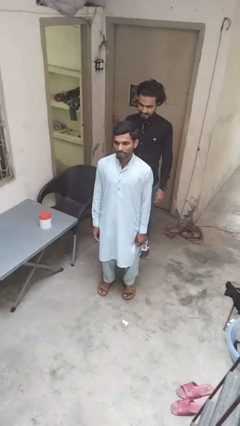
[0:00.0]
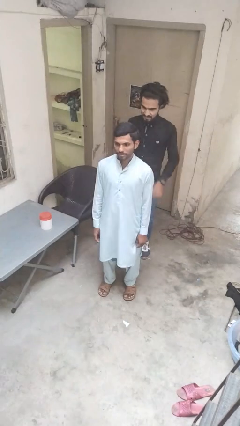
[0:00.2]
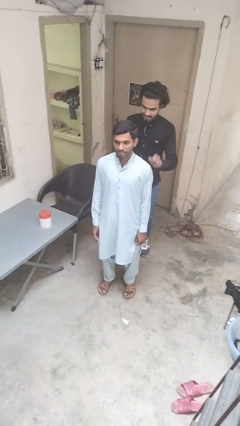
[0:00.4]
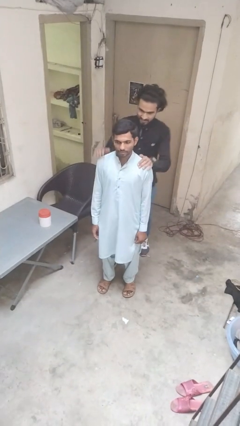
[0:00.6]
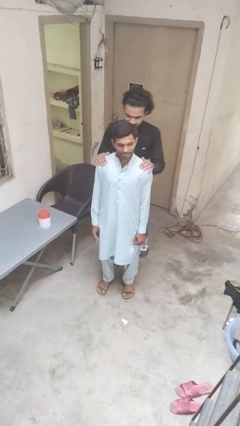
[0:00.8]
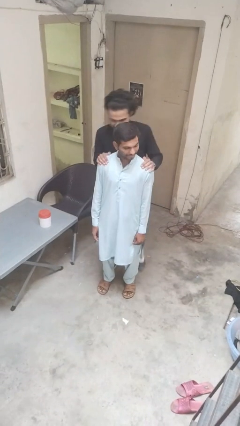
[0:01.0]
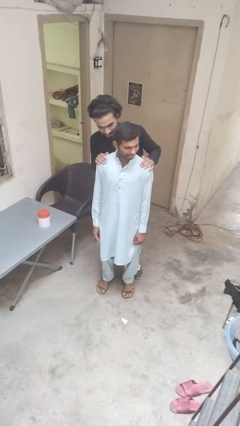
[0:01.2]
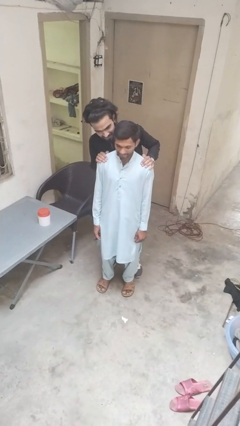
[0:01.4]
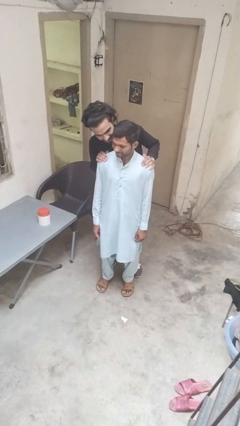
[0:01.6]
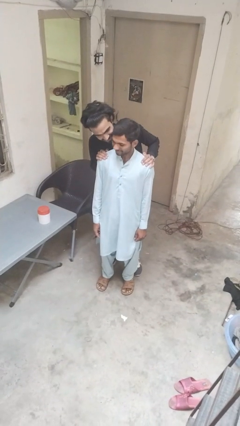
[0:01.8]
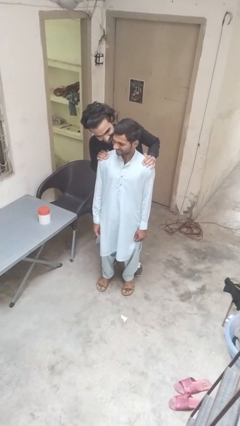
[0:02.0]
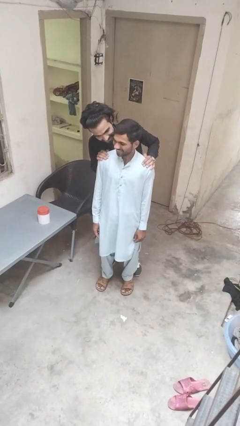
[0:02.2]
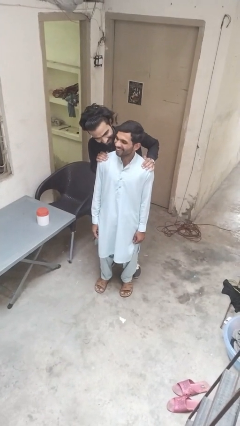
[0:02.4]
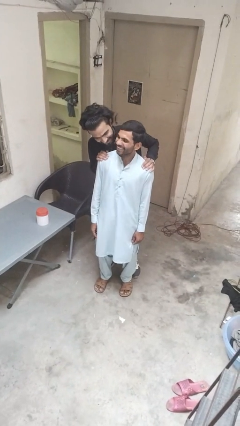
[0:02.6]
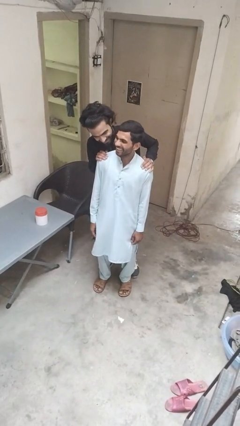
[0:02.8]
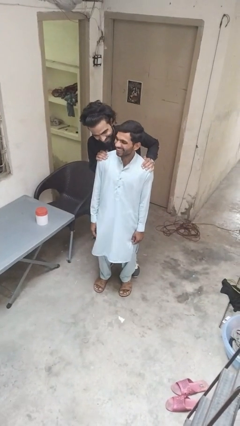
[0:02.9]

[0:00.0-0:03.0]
person looks over shoulder

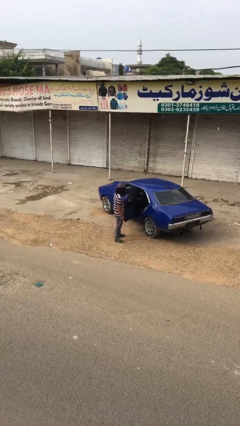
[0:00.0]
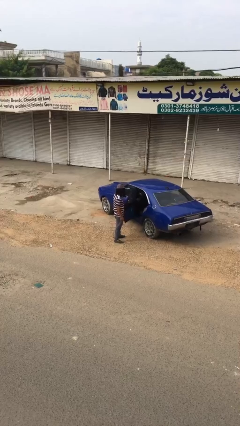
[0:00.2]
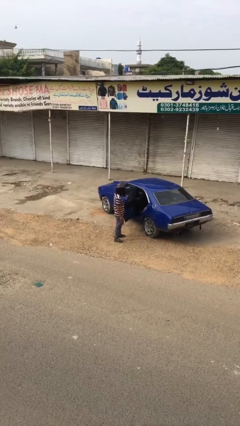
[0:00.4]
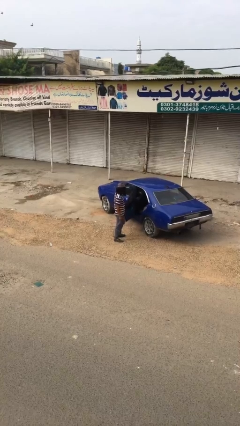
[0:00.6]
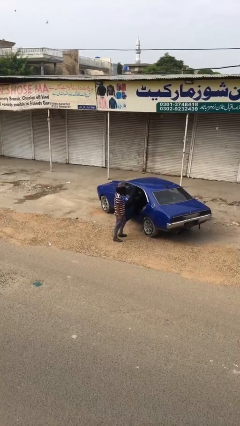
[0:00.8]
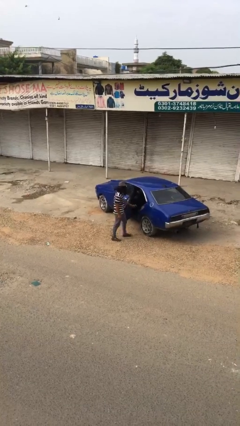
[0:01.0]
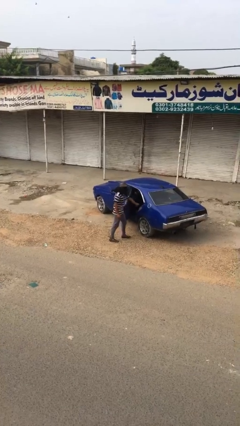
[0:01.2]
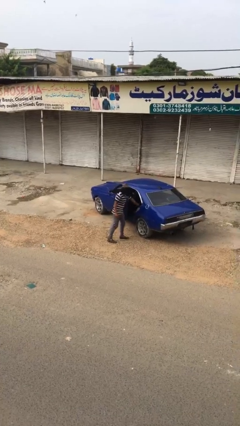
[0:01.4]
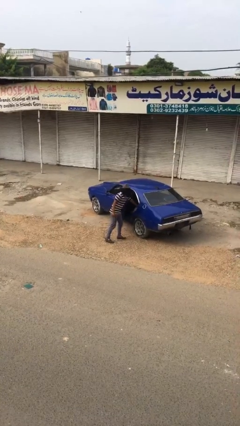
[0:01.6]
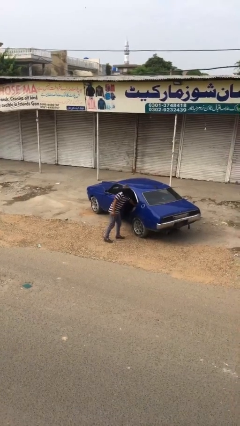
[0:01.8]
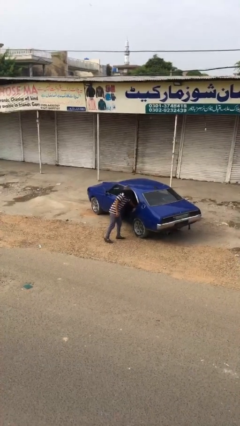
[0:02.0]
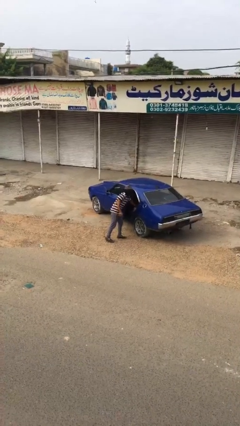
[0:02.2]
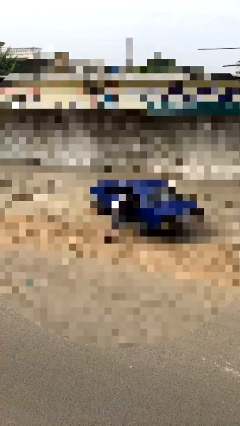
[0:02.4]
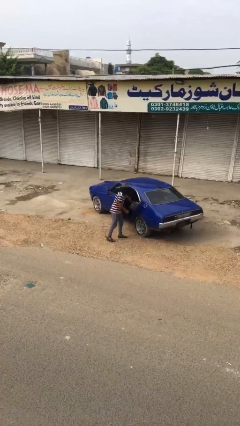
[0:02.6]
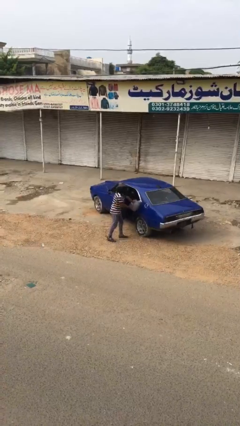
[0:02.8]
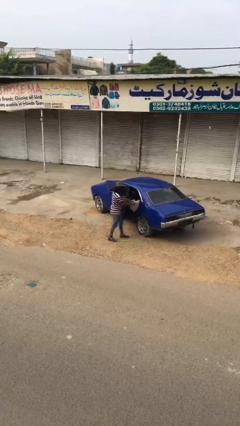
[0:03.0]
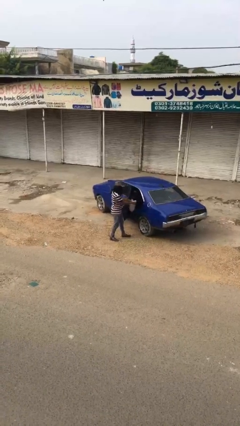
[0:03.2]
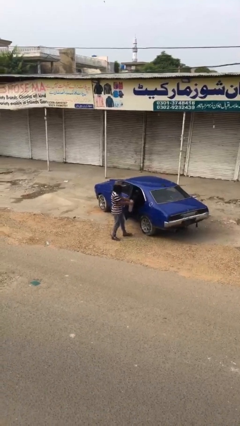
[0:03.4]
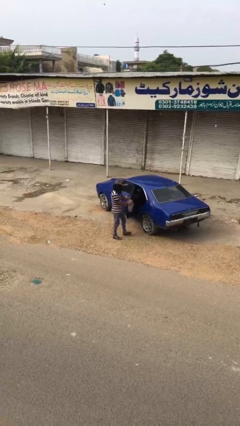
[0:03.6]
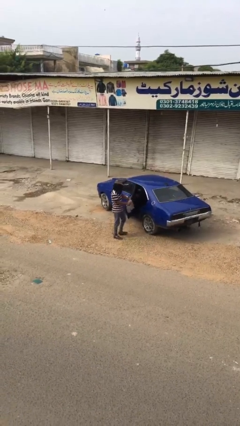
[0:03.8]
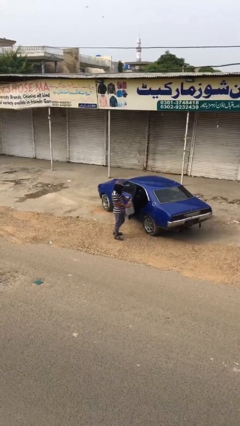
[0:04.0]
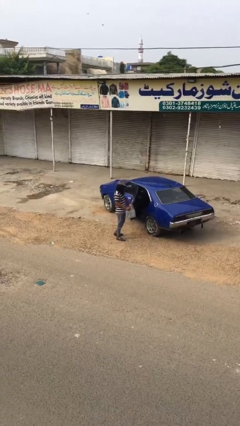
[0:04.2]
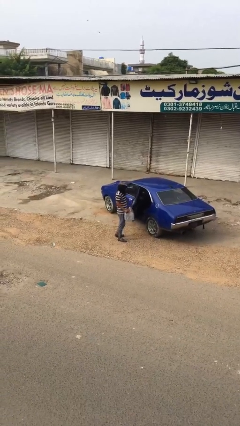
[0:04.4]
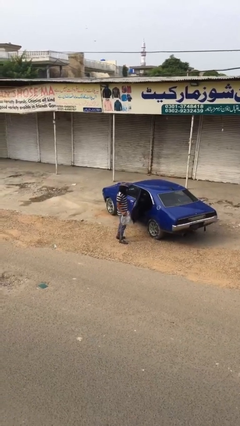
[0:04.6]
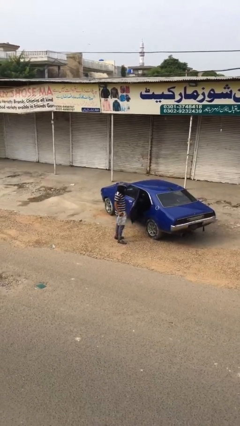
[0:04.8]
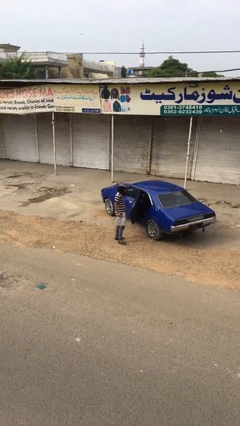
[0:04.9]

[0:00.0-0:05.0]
person unloads car

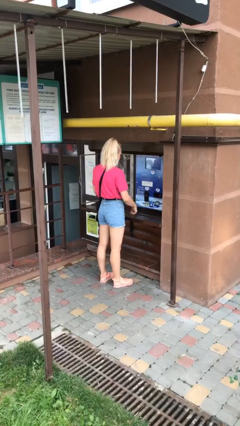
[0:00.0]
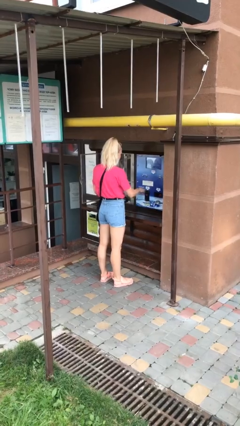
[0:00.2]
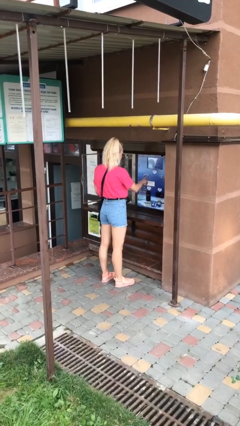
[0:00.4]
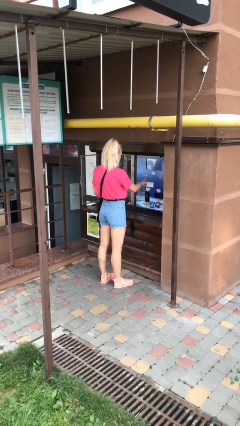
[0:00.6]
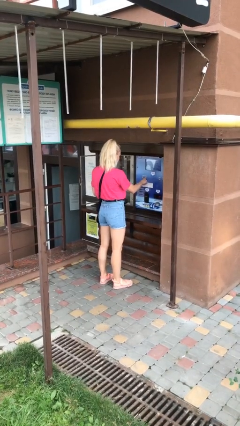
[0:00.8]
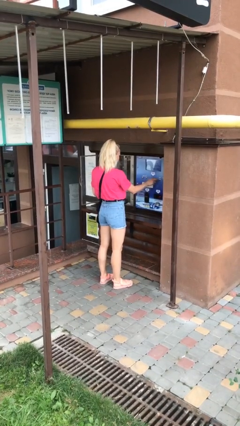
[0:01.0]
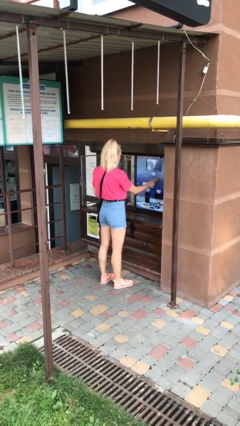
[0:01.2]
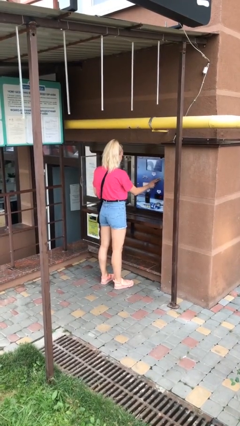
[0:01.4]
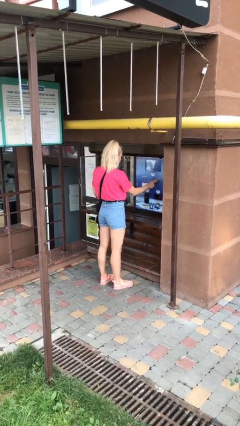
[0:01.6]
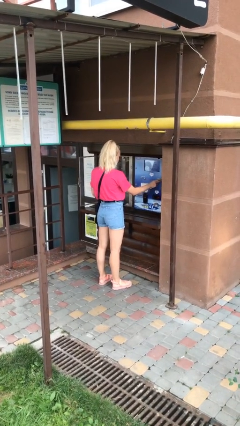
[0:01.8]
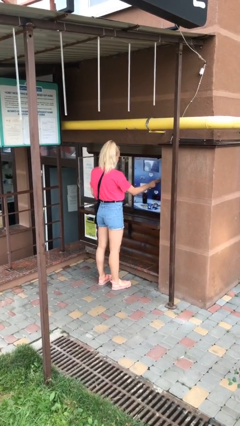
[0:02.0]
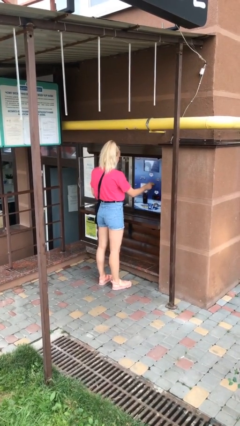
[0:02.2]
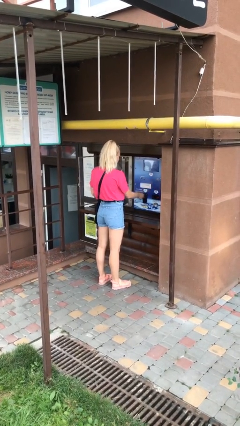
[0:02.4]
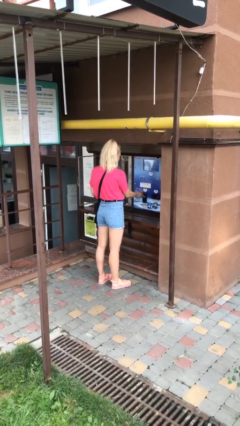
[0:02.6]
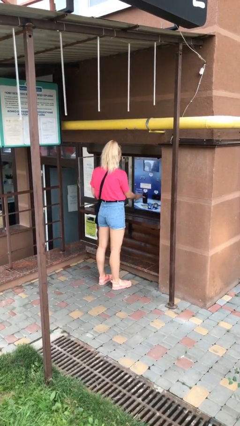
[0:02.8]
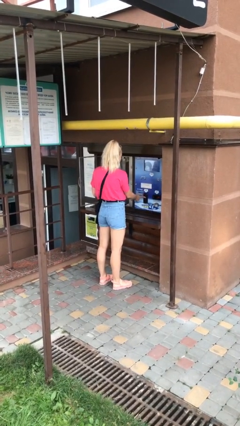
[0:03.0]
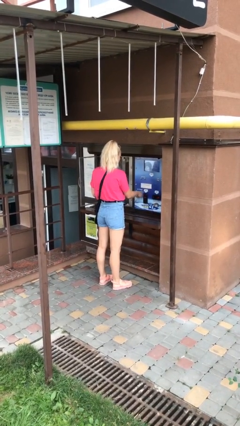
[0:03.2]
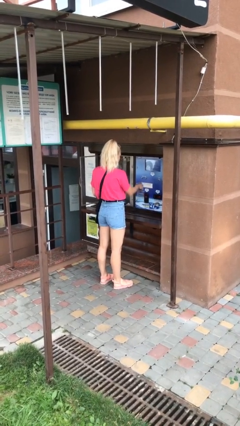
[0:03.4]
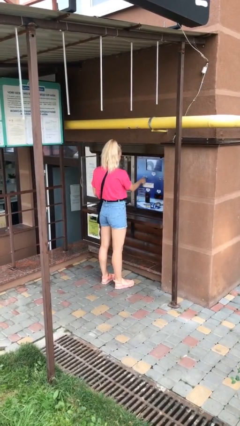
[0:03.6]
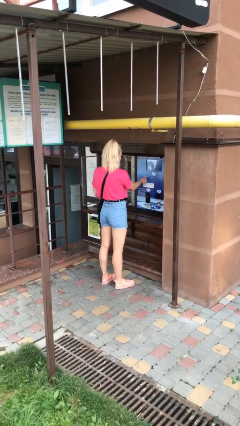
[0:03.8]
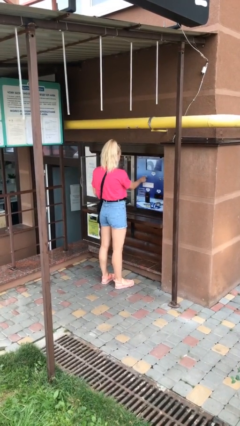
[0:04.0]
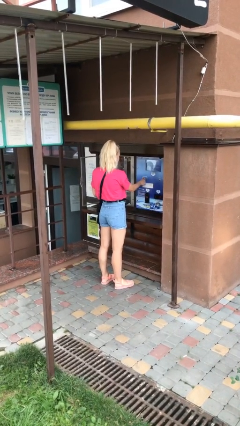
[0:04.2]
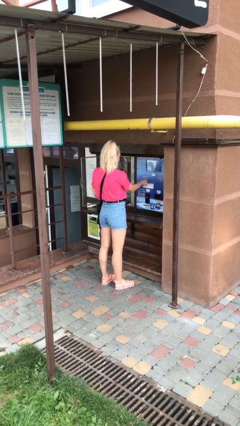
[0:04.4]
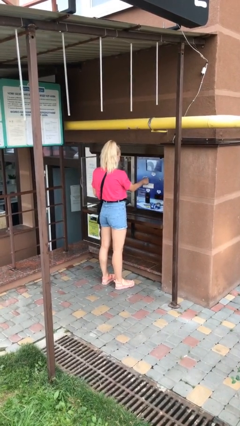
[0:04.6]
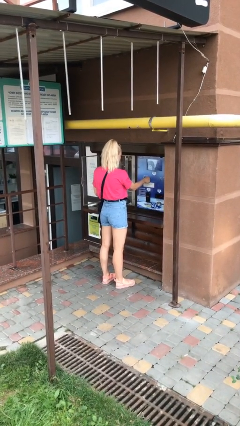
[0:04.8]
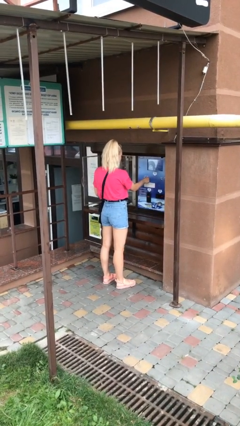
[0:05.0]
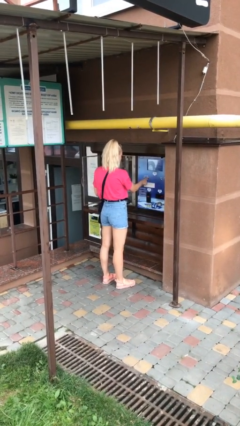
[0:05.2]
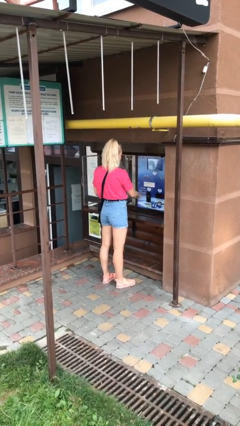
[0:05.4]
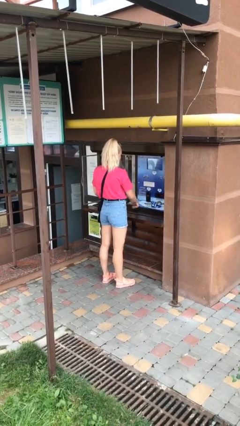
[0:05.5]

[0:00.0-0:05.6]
person purchases from machine

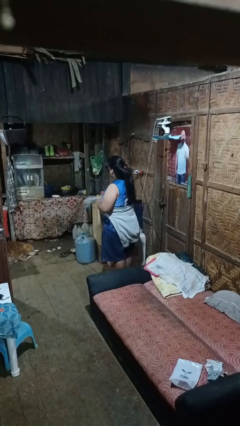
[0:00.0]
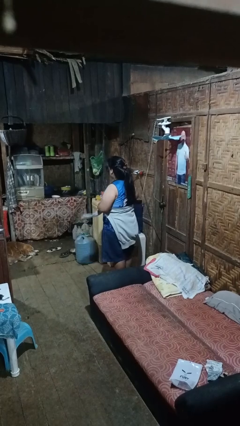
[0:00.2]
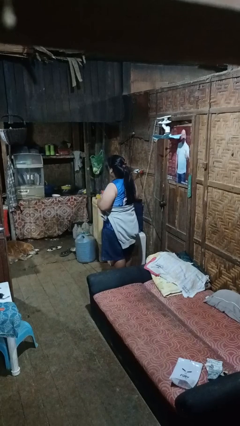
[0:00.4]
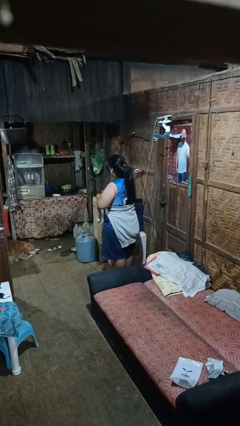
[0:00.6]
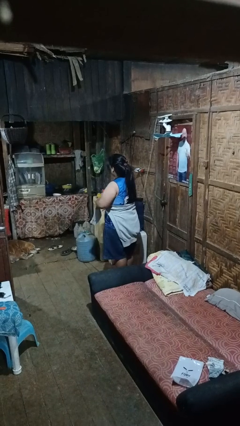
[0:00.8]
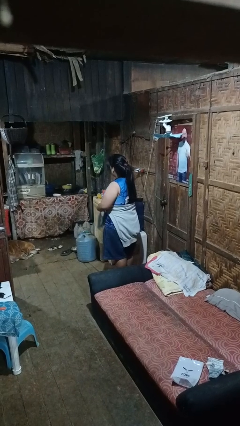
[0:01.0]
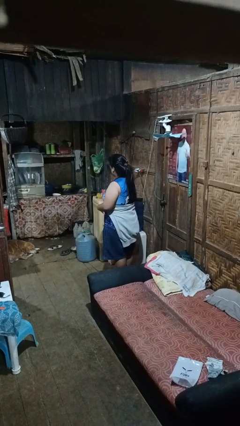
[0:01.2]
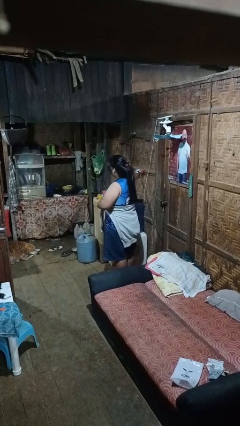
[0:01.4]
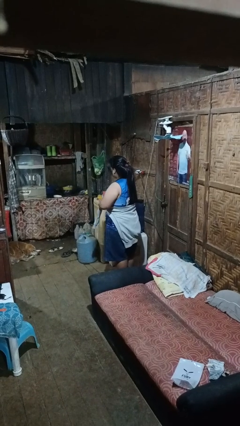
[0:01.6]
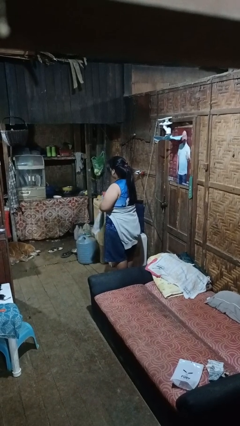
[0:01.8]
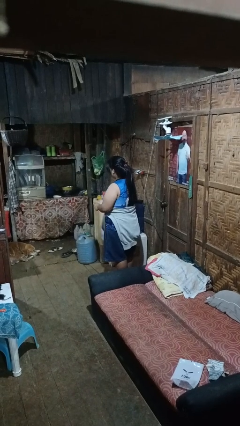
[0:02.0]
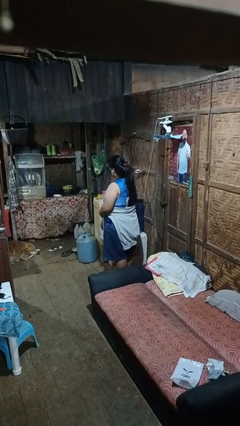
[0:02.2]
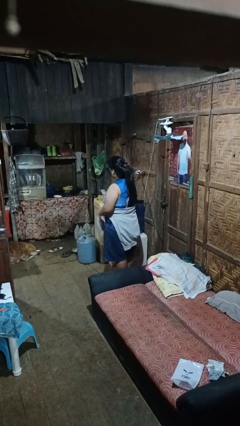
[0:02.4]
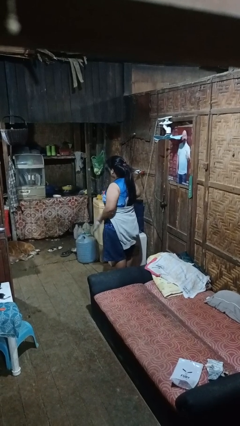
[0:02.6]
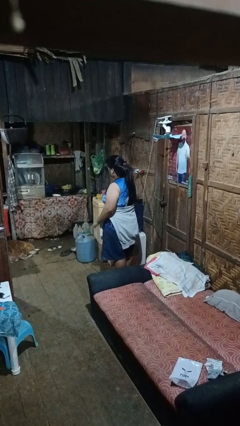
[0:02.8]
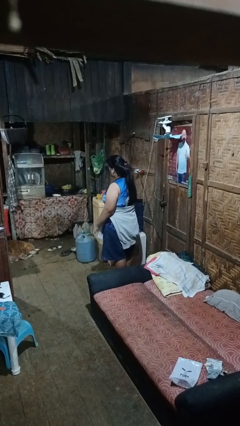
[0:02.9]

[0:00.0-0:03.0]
person ties jacket around waist

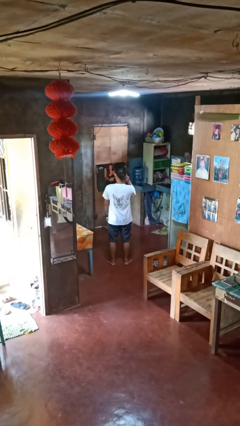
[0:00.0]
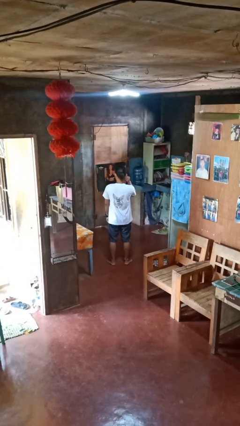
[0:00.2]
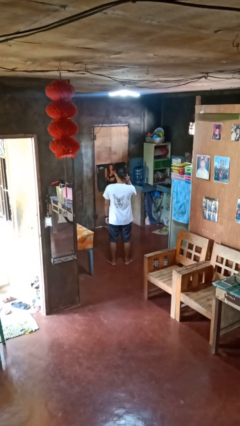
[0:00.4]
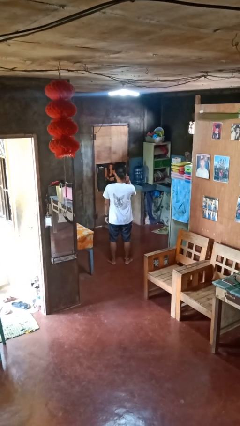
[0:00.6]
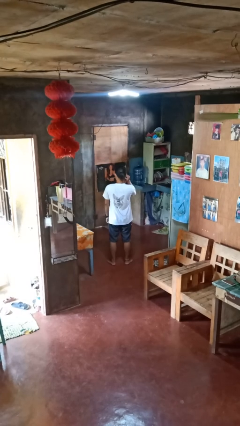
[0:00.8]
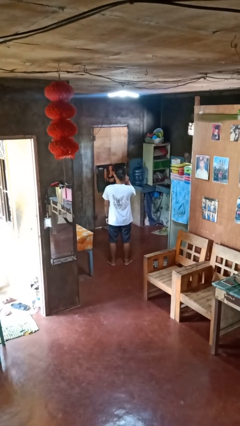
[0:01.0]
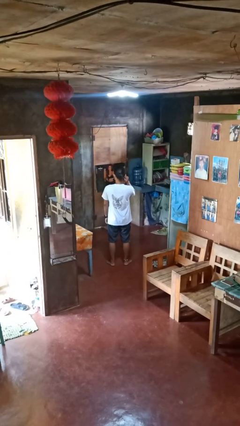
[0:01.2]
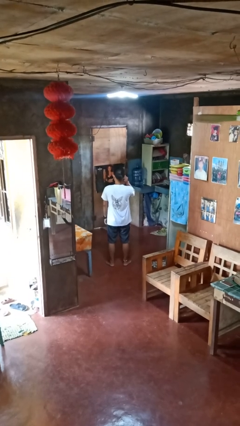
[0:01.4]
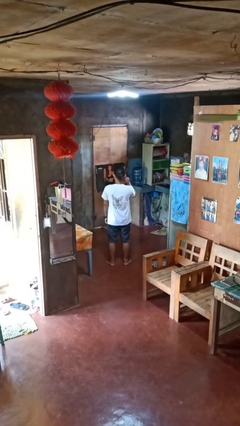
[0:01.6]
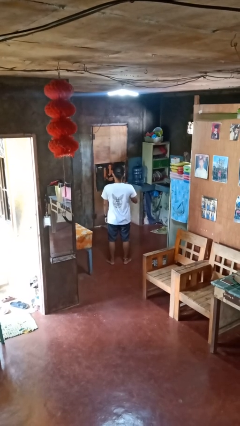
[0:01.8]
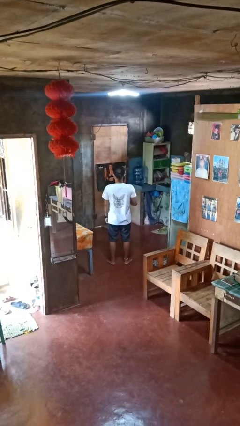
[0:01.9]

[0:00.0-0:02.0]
person touches earlobe
